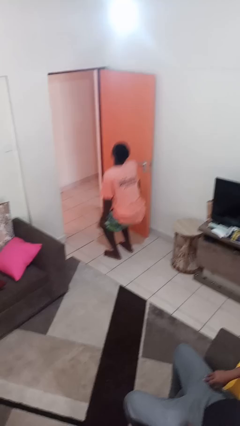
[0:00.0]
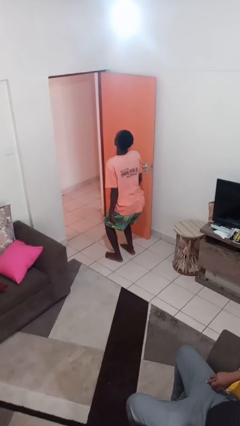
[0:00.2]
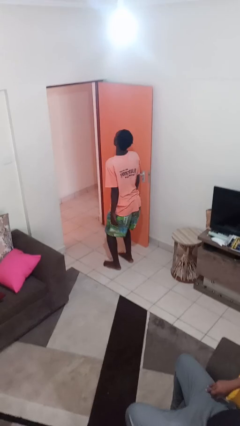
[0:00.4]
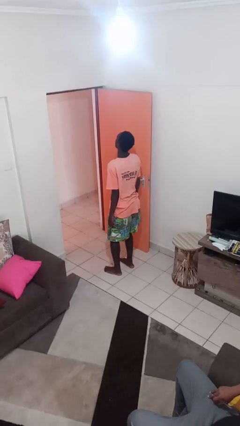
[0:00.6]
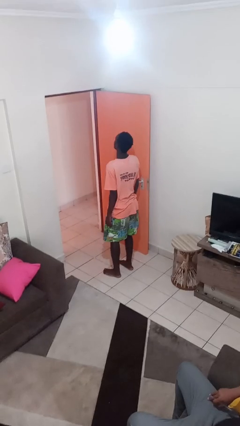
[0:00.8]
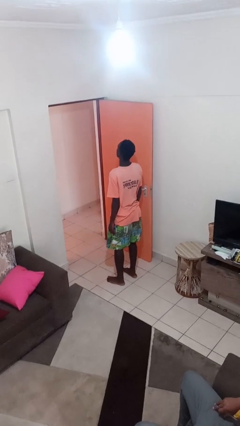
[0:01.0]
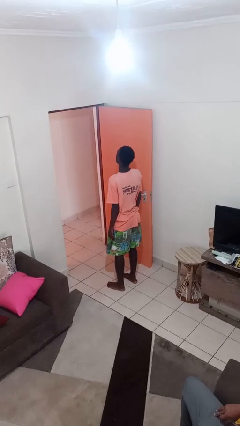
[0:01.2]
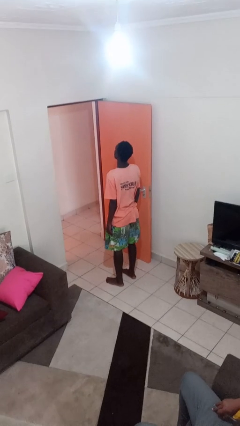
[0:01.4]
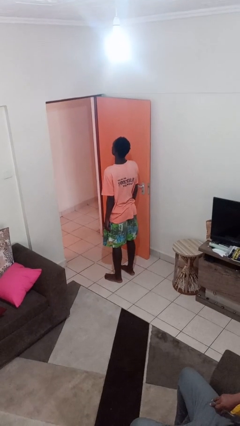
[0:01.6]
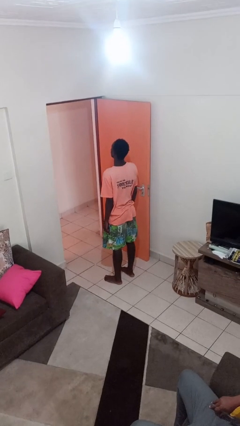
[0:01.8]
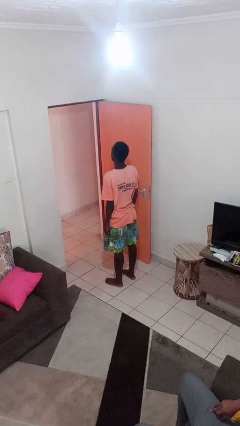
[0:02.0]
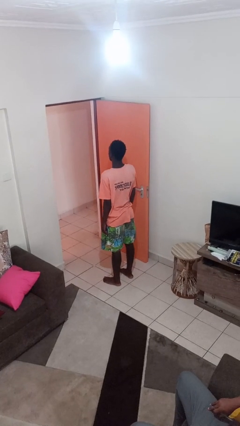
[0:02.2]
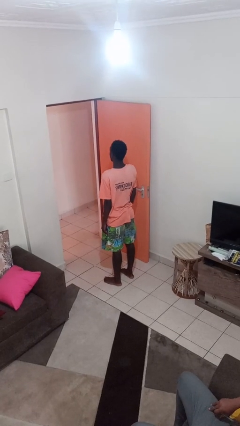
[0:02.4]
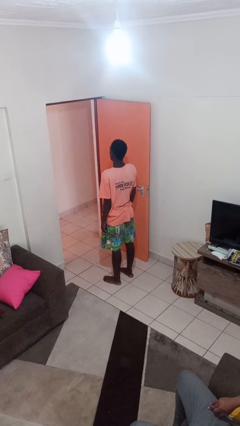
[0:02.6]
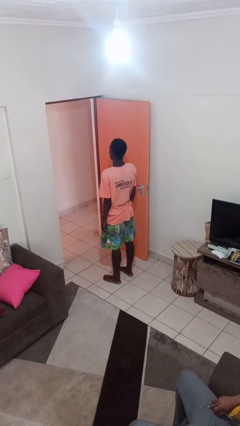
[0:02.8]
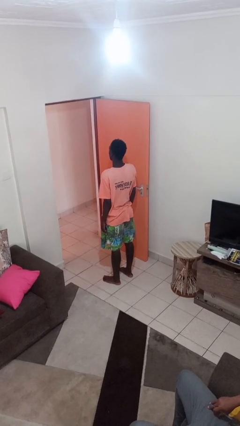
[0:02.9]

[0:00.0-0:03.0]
person stands up

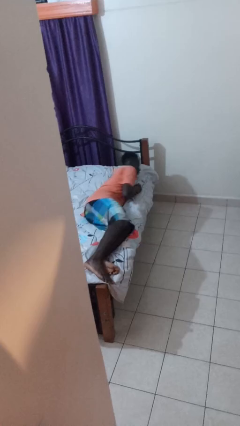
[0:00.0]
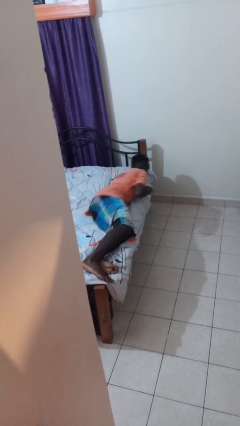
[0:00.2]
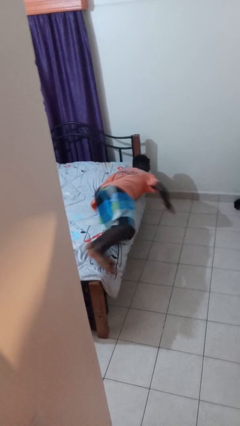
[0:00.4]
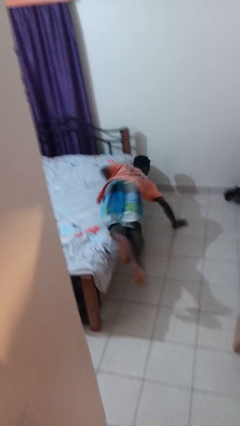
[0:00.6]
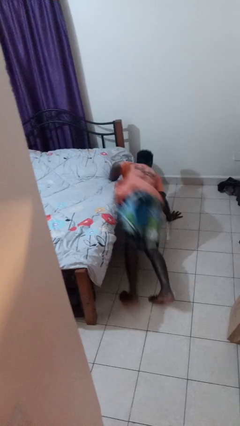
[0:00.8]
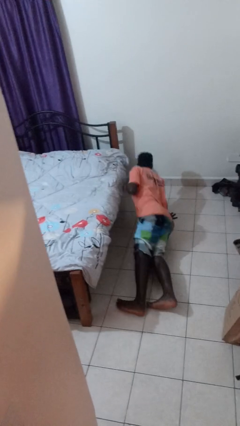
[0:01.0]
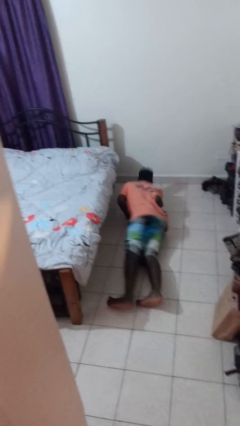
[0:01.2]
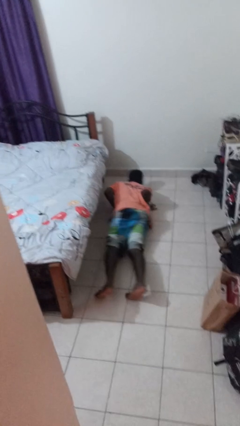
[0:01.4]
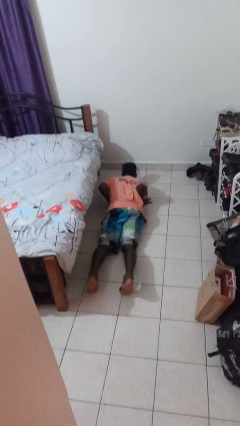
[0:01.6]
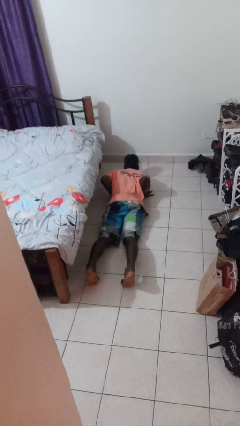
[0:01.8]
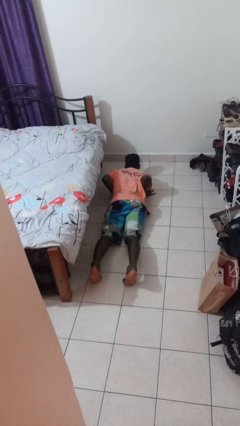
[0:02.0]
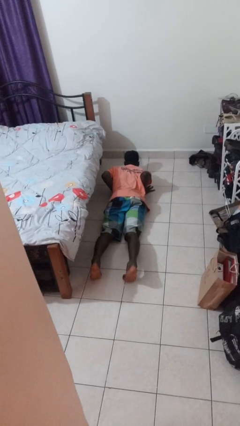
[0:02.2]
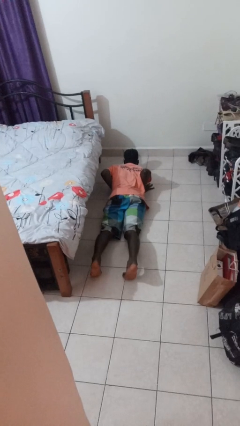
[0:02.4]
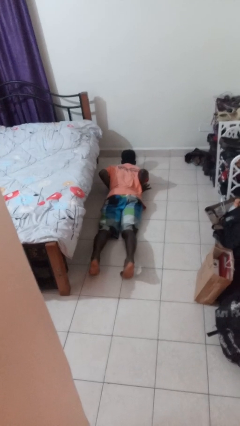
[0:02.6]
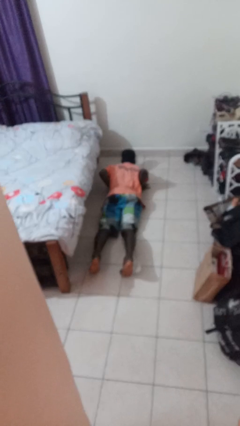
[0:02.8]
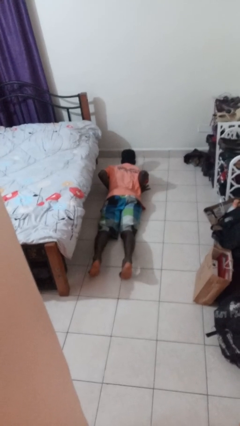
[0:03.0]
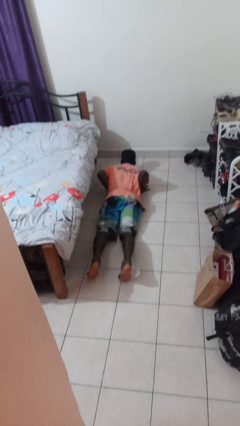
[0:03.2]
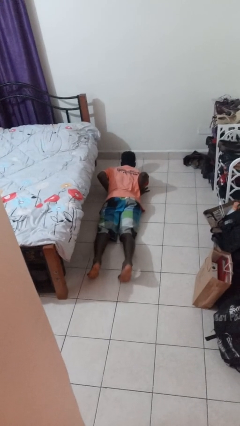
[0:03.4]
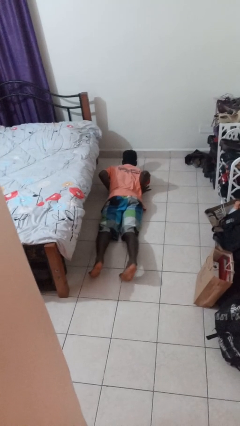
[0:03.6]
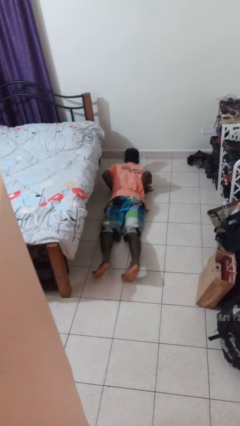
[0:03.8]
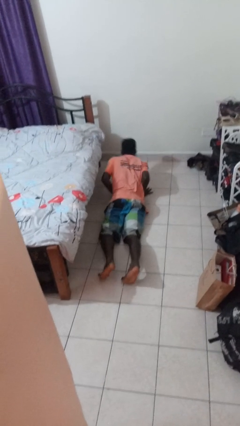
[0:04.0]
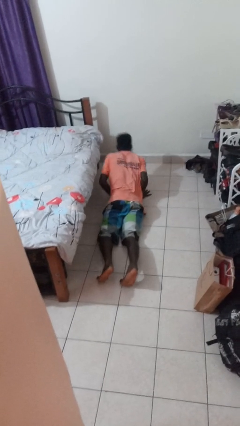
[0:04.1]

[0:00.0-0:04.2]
person falls from bed

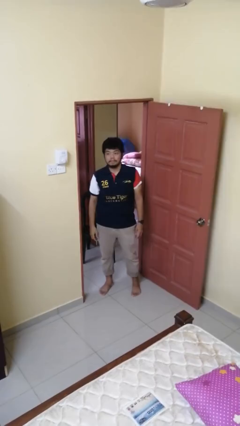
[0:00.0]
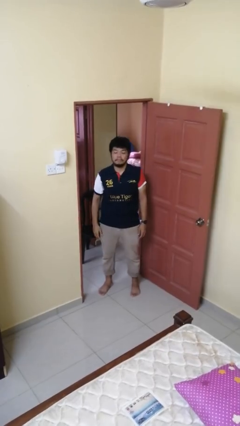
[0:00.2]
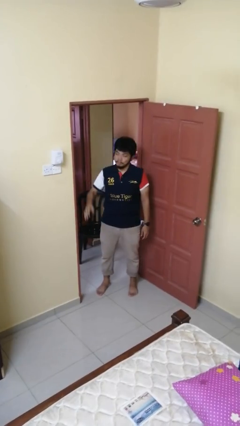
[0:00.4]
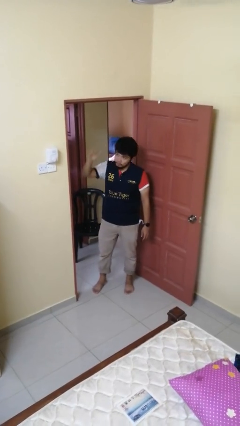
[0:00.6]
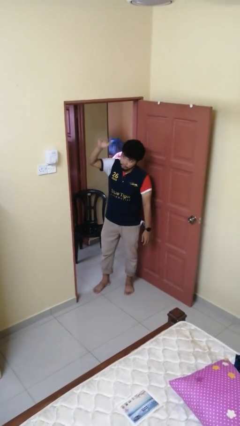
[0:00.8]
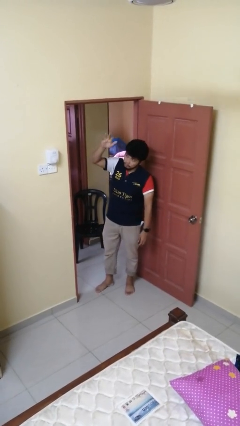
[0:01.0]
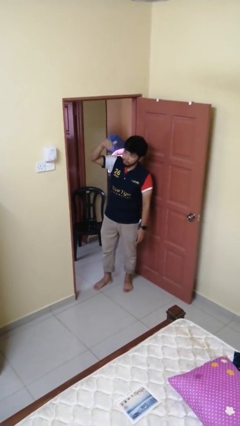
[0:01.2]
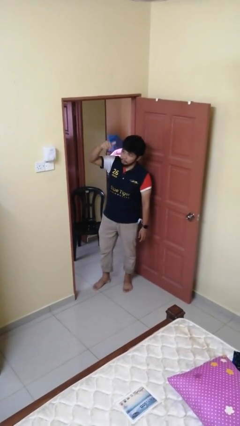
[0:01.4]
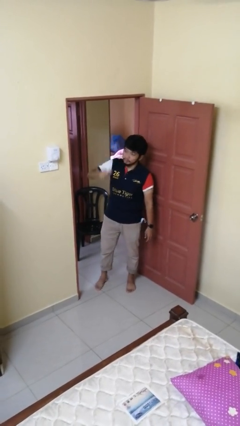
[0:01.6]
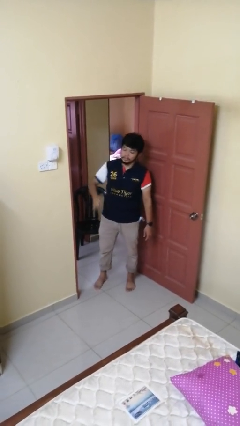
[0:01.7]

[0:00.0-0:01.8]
person gestures come here

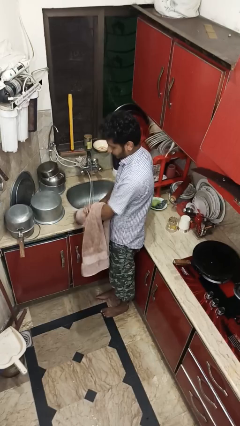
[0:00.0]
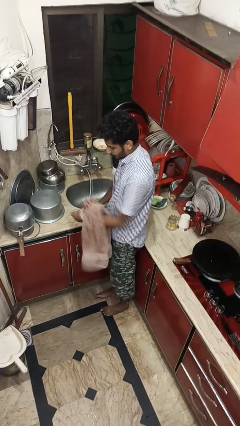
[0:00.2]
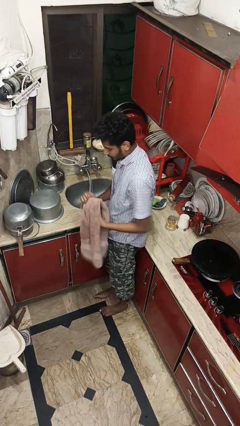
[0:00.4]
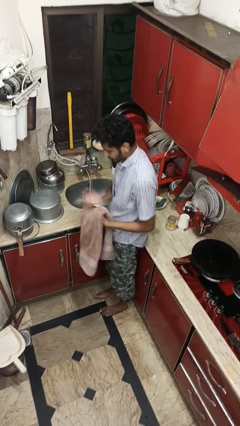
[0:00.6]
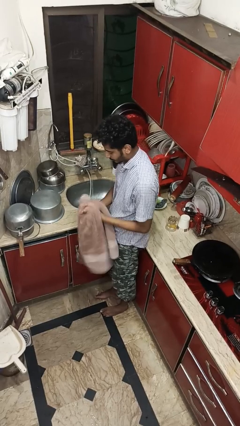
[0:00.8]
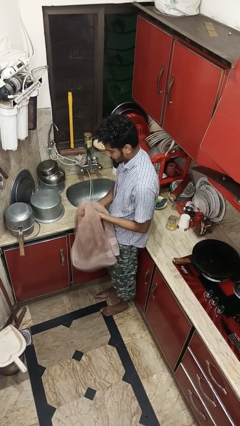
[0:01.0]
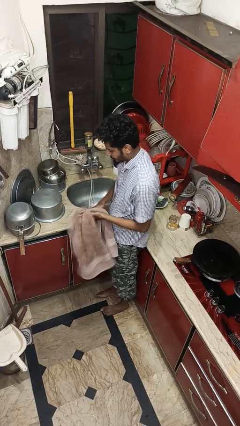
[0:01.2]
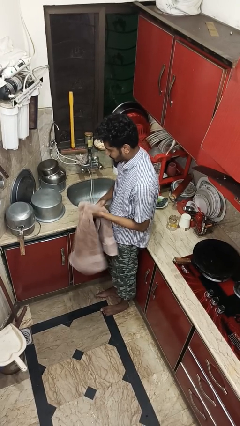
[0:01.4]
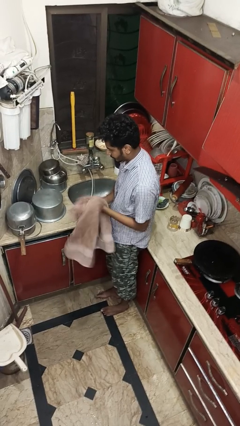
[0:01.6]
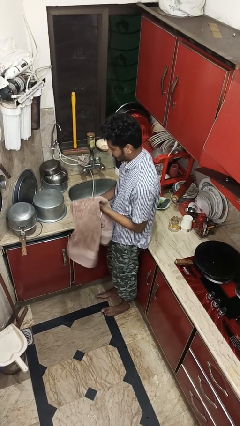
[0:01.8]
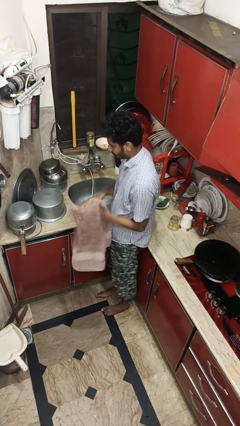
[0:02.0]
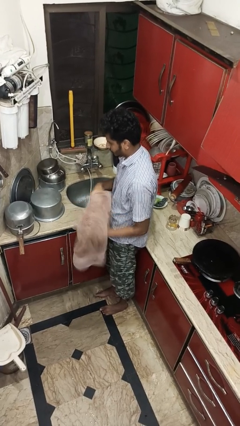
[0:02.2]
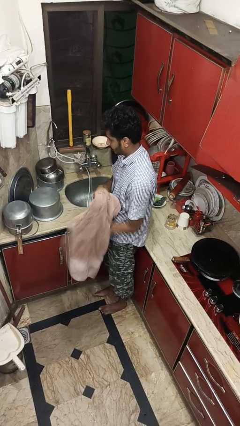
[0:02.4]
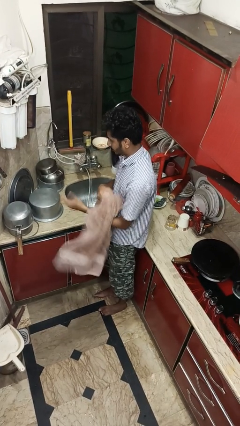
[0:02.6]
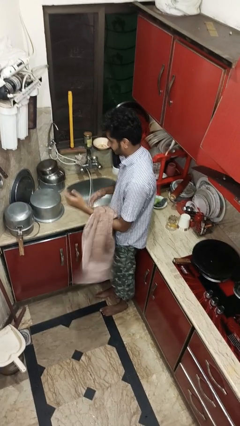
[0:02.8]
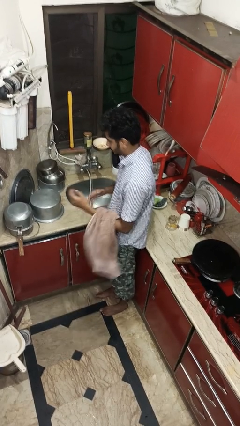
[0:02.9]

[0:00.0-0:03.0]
person dries hands with towel

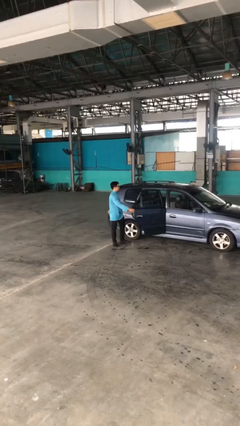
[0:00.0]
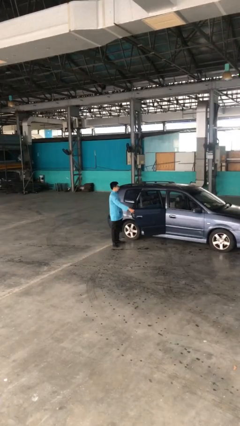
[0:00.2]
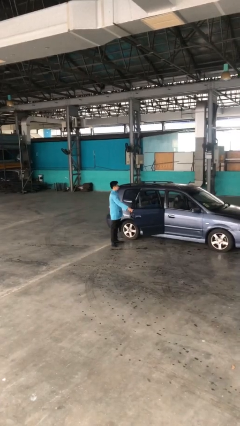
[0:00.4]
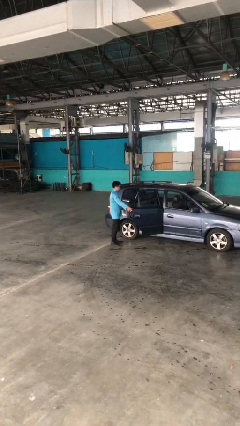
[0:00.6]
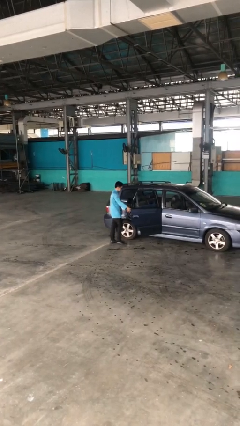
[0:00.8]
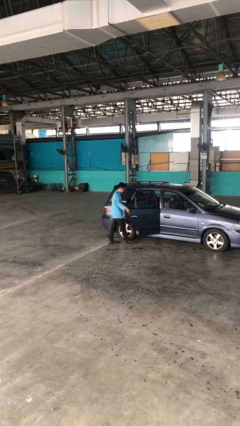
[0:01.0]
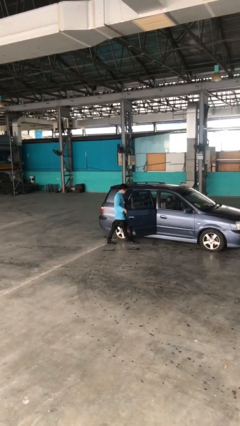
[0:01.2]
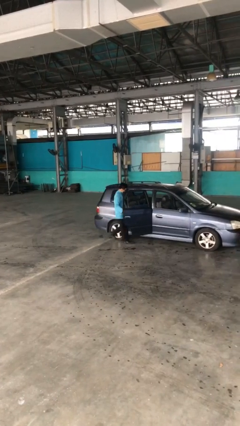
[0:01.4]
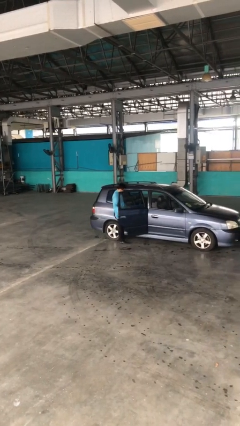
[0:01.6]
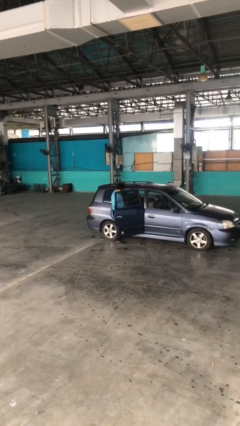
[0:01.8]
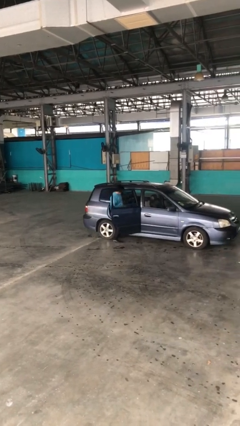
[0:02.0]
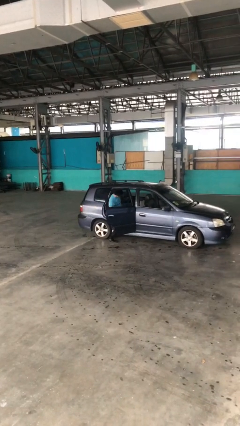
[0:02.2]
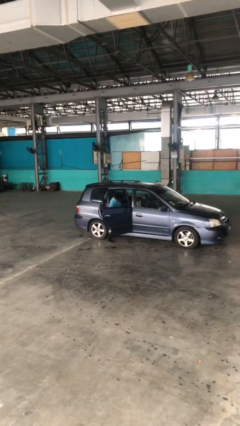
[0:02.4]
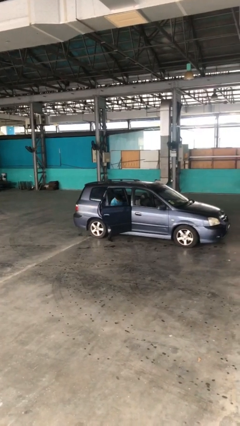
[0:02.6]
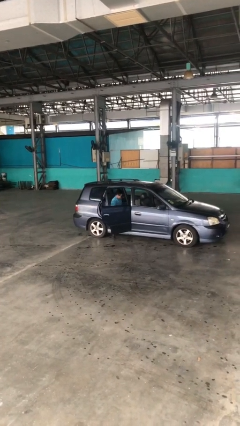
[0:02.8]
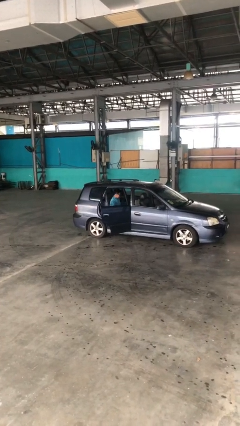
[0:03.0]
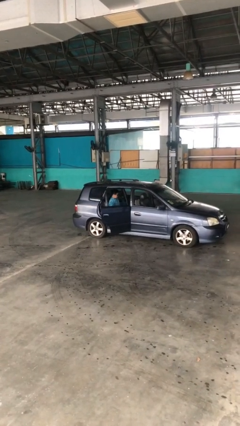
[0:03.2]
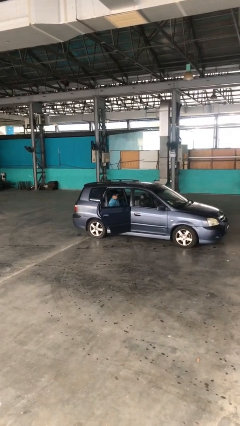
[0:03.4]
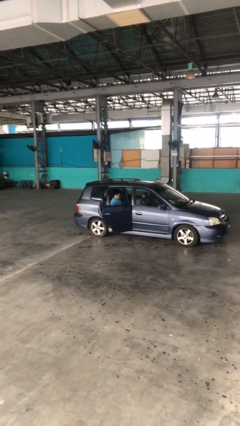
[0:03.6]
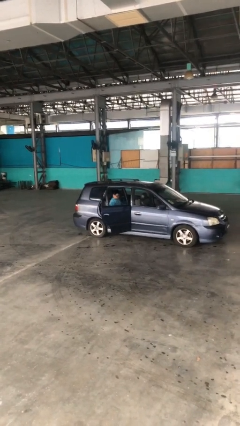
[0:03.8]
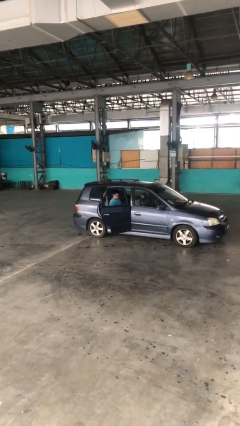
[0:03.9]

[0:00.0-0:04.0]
person enters car

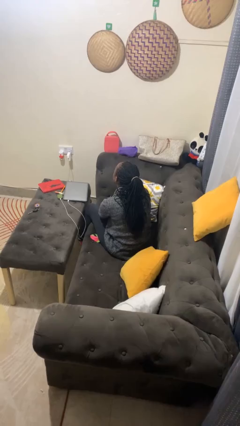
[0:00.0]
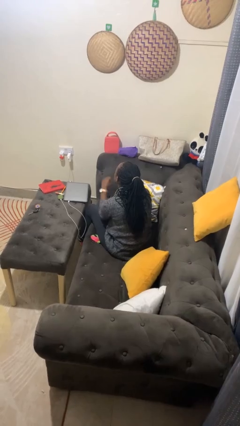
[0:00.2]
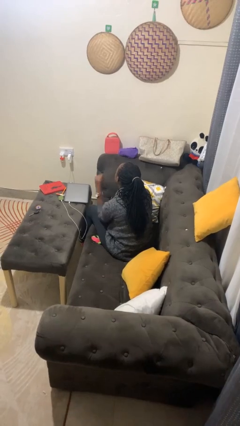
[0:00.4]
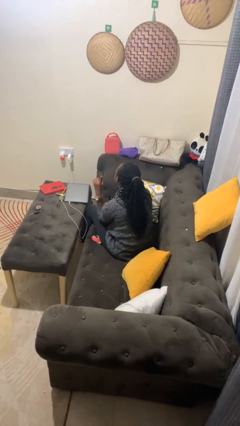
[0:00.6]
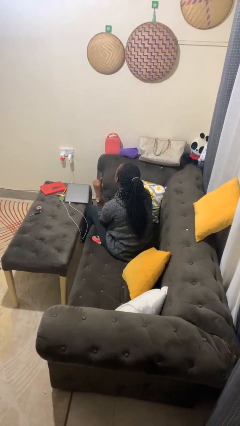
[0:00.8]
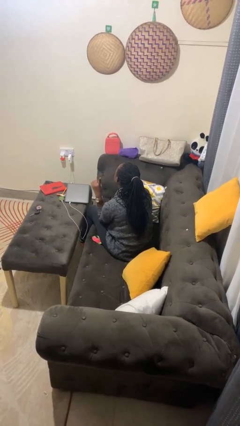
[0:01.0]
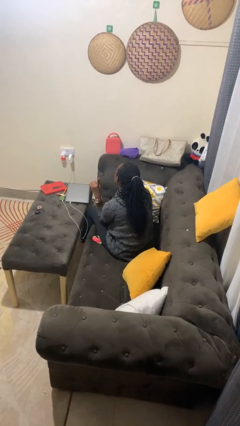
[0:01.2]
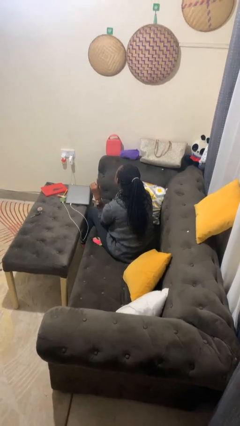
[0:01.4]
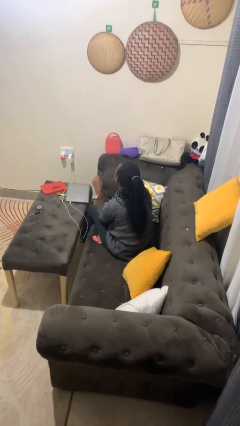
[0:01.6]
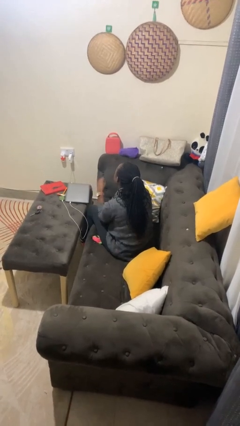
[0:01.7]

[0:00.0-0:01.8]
person gestures number one
